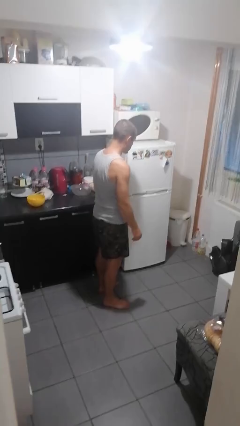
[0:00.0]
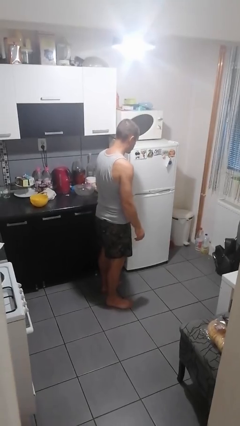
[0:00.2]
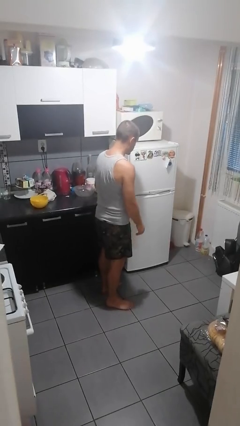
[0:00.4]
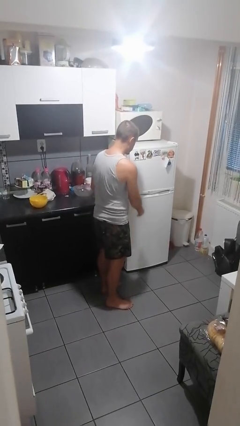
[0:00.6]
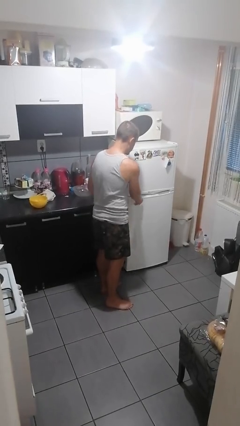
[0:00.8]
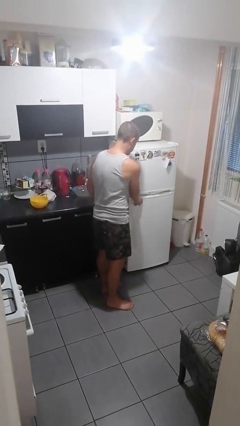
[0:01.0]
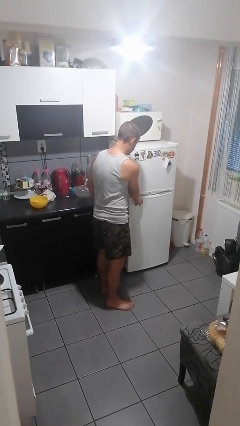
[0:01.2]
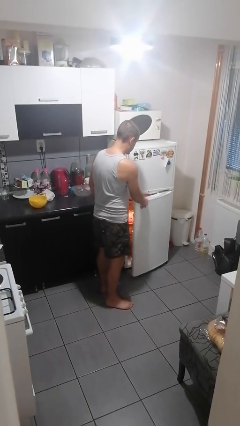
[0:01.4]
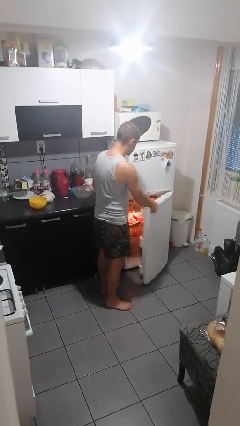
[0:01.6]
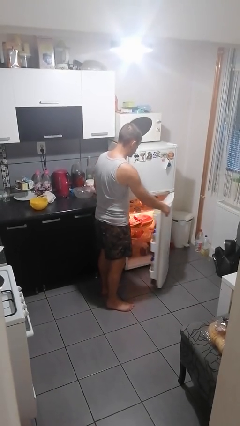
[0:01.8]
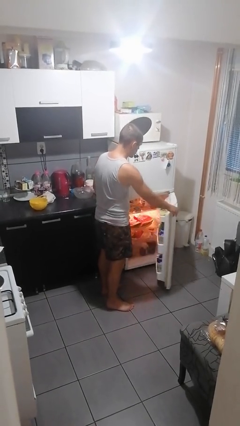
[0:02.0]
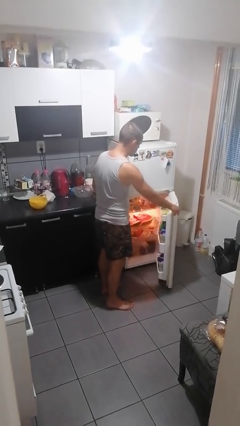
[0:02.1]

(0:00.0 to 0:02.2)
person opens refrigerator

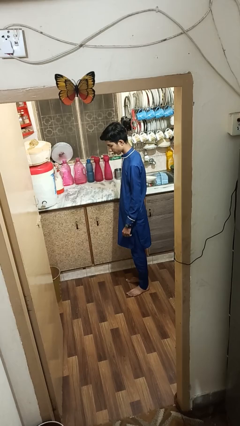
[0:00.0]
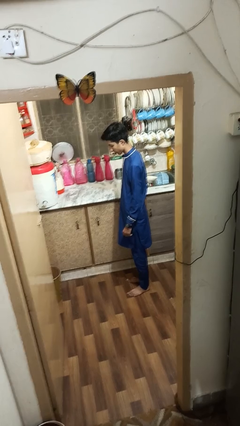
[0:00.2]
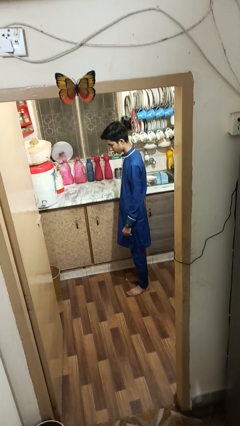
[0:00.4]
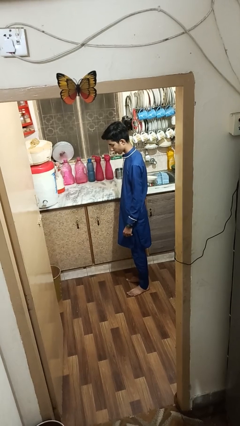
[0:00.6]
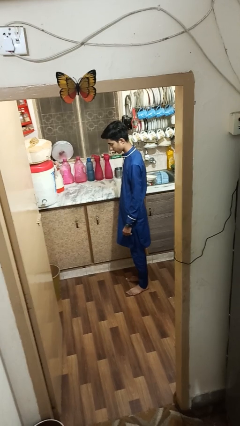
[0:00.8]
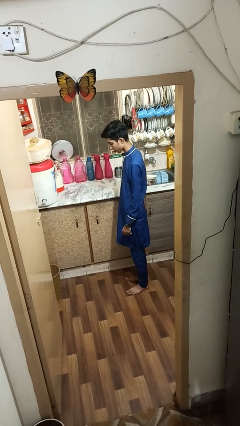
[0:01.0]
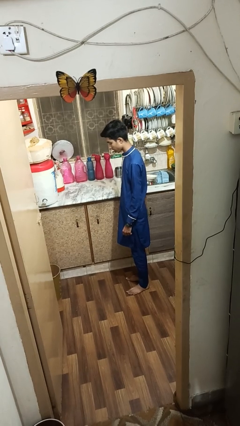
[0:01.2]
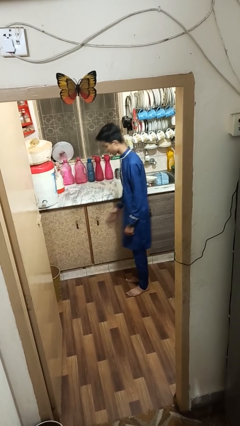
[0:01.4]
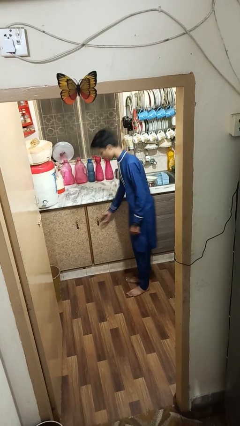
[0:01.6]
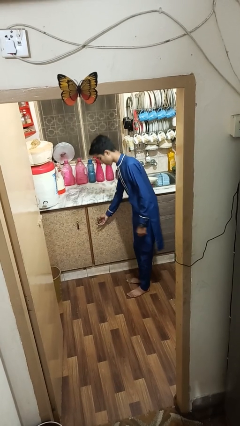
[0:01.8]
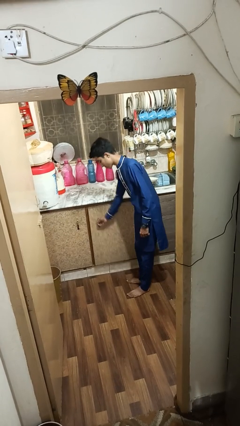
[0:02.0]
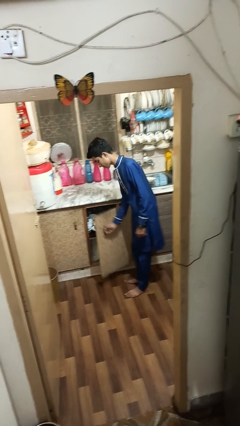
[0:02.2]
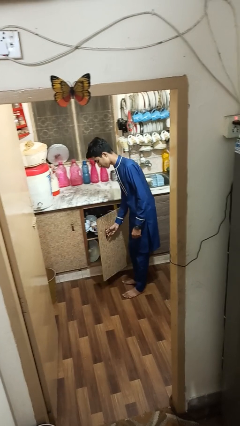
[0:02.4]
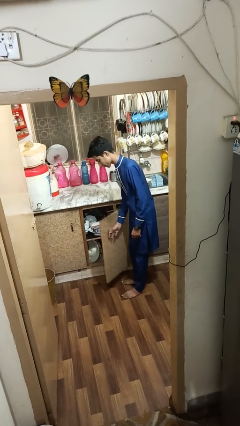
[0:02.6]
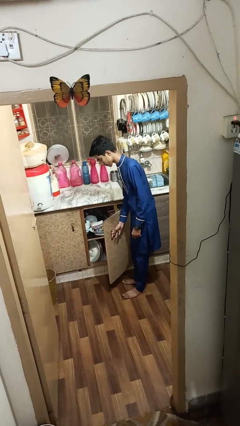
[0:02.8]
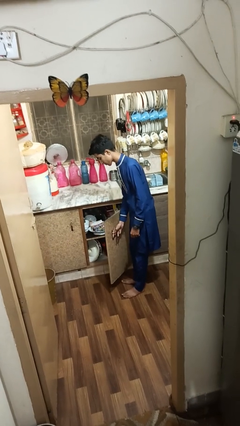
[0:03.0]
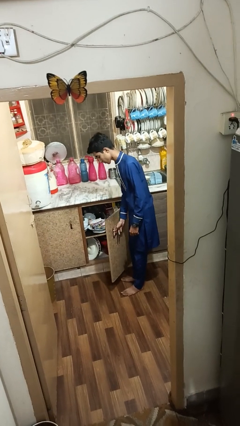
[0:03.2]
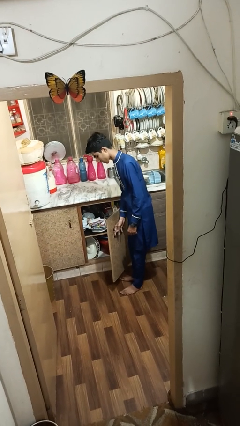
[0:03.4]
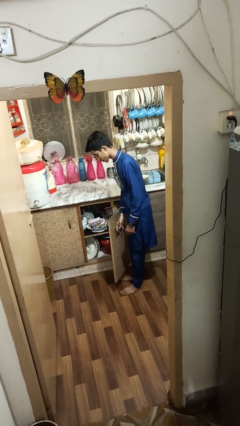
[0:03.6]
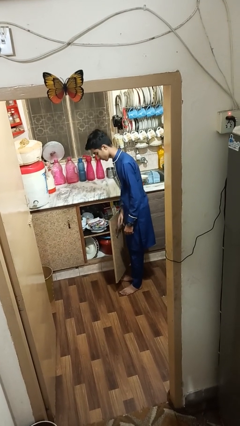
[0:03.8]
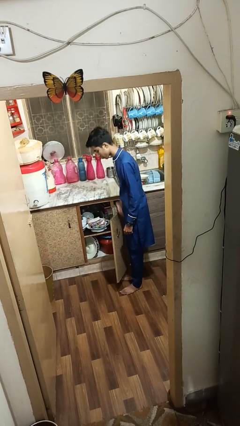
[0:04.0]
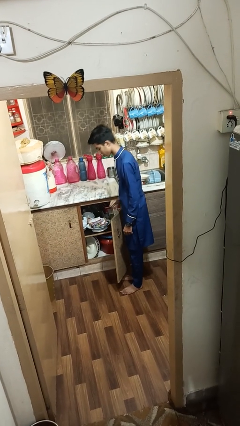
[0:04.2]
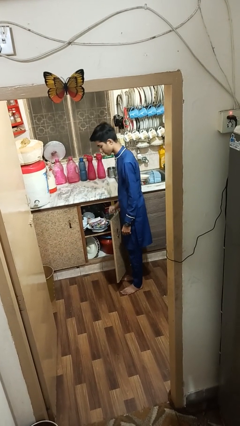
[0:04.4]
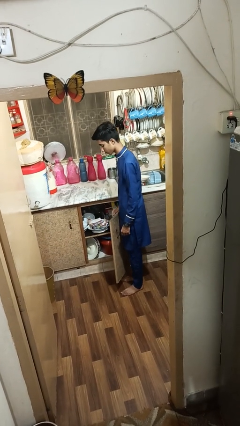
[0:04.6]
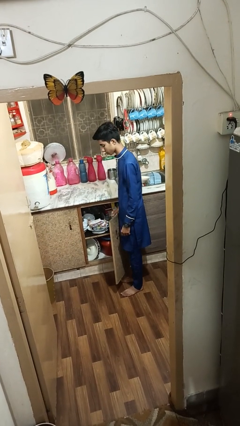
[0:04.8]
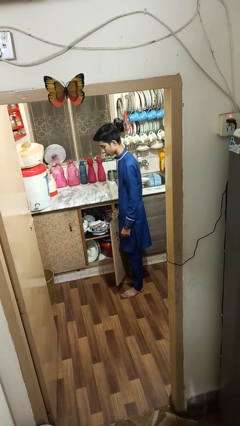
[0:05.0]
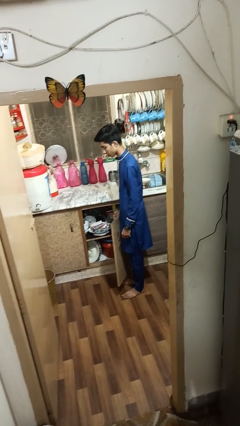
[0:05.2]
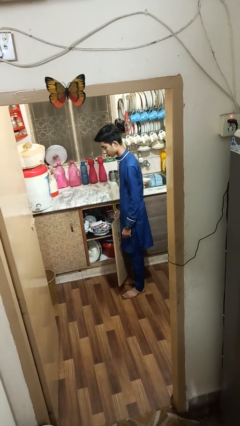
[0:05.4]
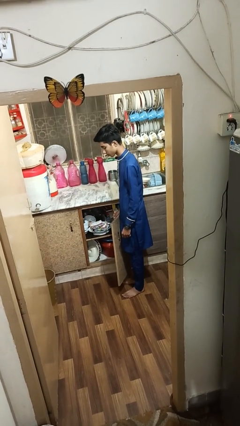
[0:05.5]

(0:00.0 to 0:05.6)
person opens cabinet

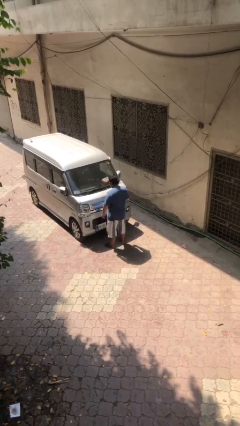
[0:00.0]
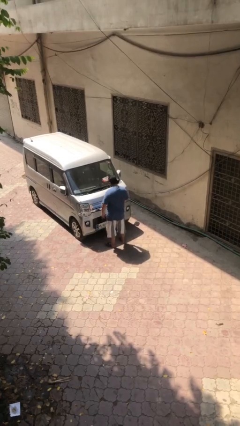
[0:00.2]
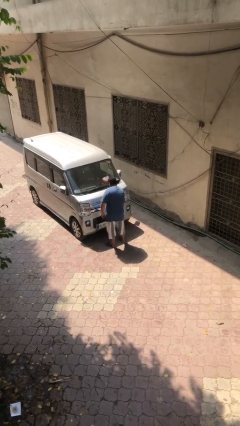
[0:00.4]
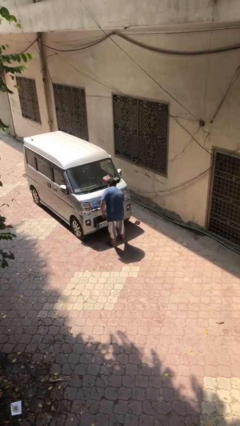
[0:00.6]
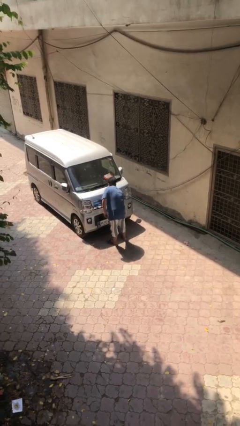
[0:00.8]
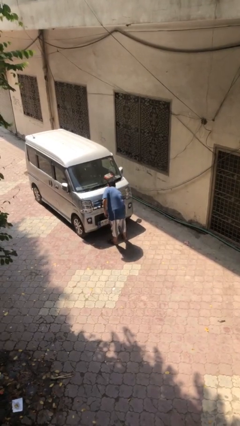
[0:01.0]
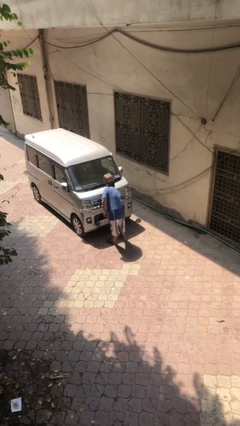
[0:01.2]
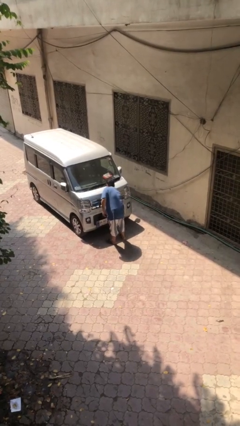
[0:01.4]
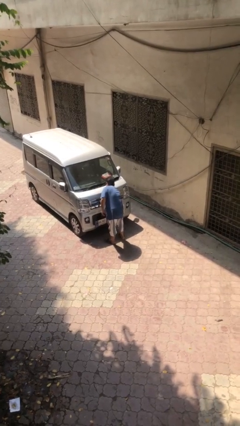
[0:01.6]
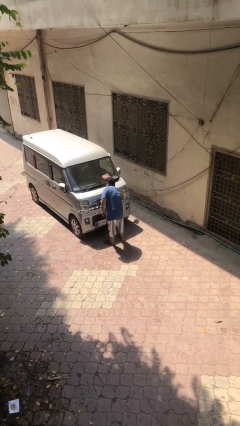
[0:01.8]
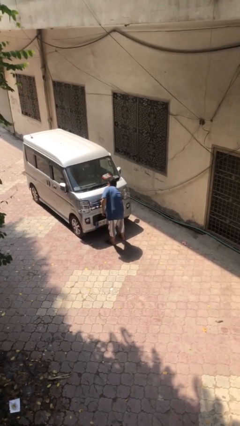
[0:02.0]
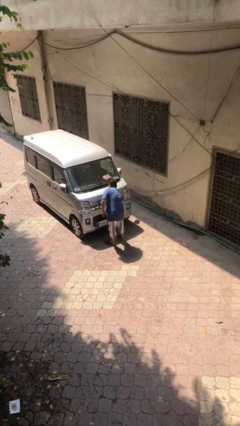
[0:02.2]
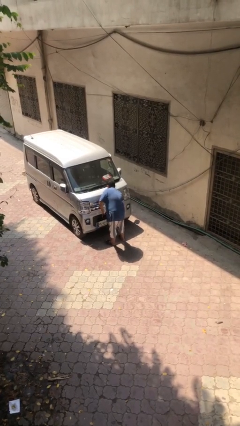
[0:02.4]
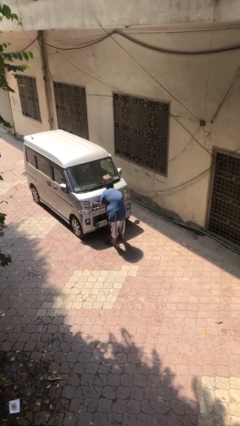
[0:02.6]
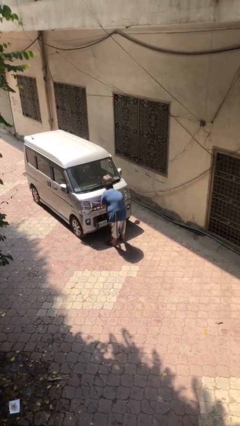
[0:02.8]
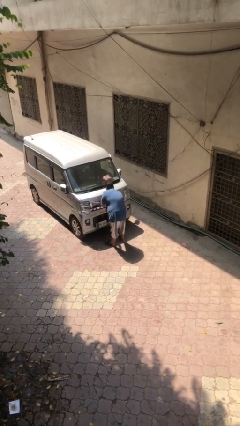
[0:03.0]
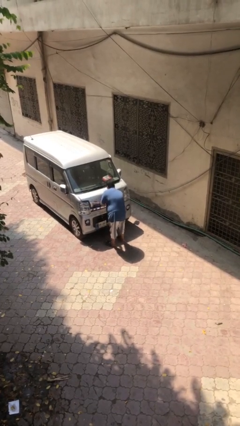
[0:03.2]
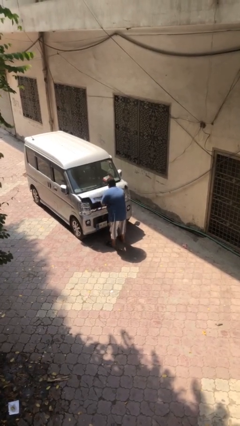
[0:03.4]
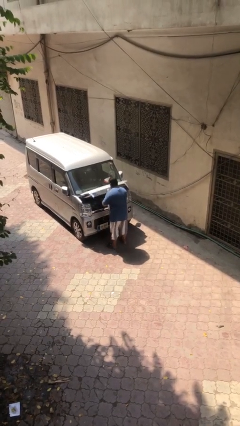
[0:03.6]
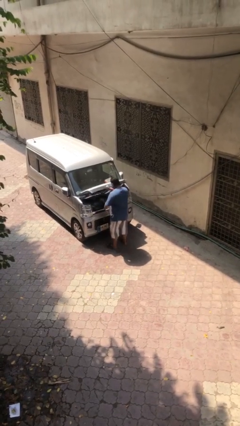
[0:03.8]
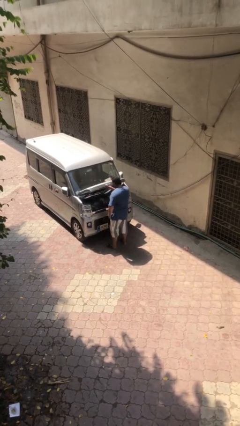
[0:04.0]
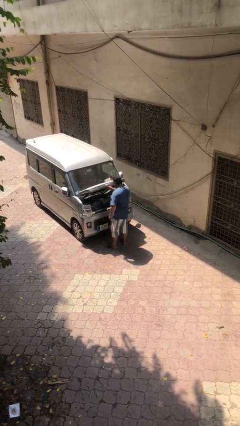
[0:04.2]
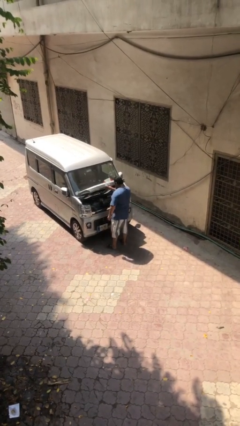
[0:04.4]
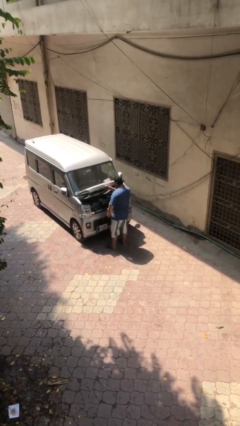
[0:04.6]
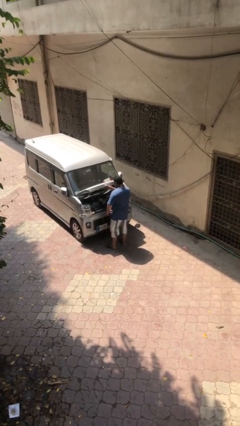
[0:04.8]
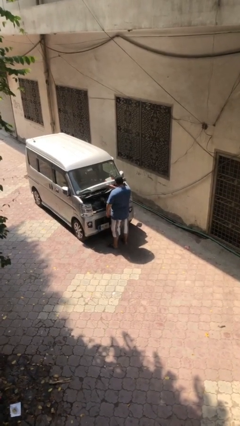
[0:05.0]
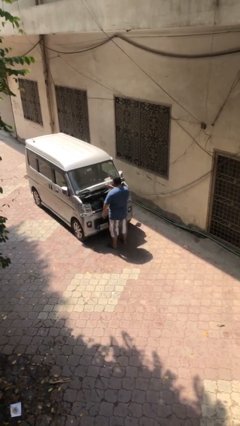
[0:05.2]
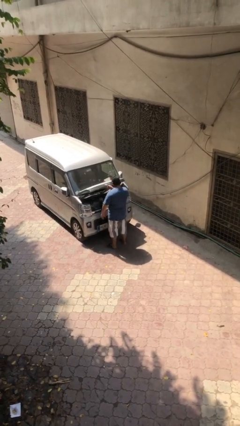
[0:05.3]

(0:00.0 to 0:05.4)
person opens car hood

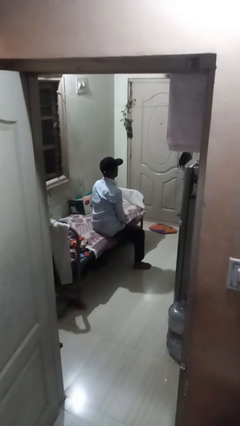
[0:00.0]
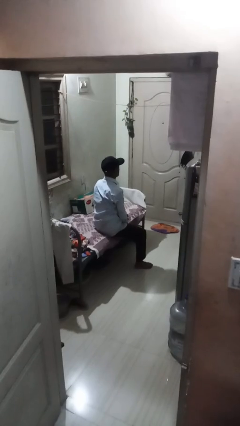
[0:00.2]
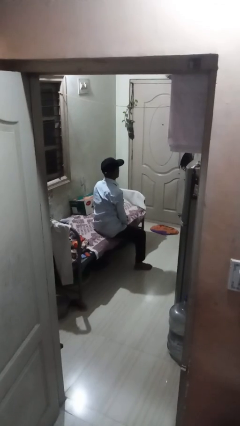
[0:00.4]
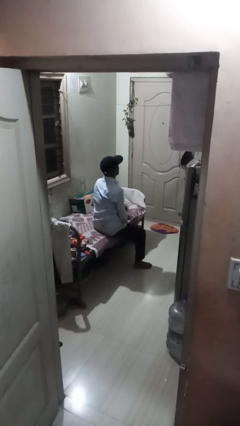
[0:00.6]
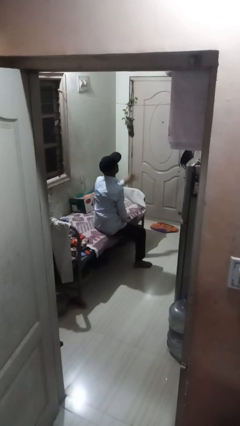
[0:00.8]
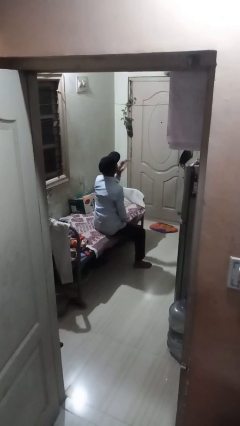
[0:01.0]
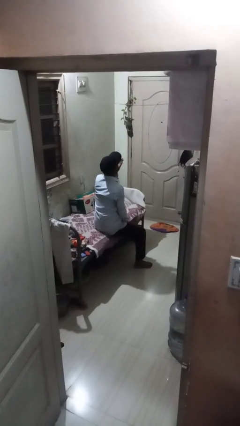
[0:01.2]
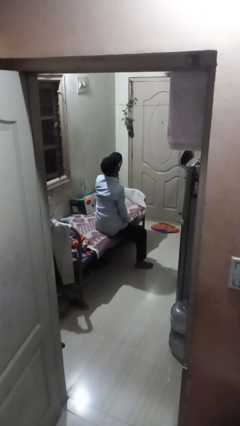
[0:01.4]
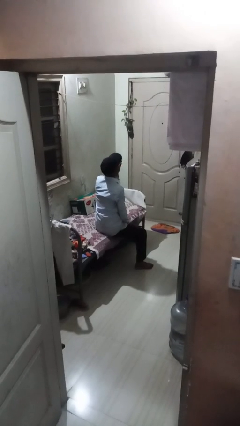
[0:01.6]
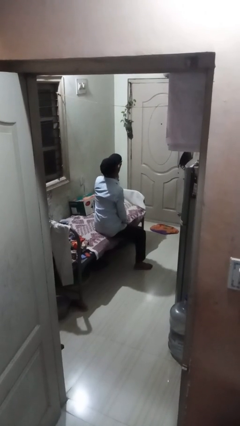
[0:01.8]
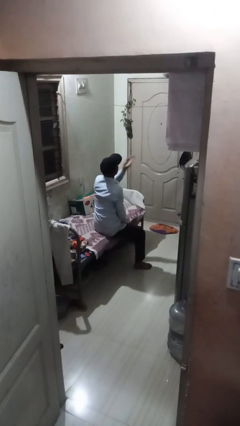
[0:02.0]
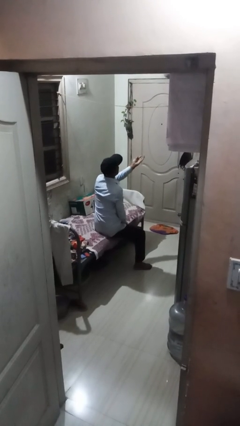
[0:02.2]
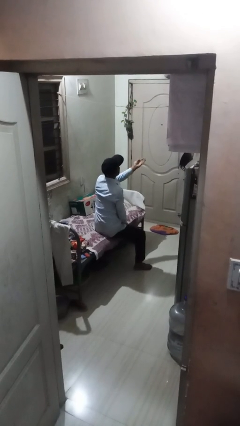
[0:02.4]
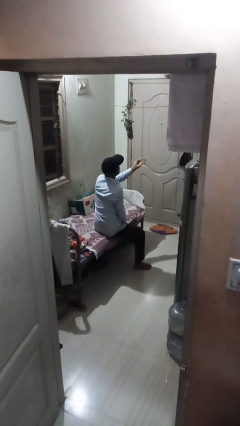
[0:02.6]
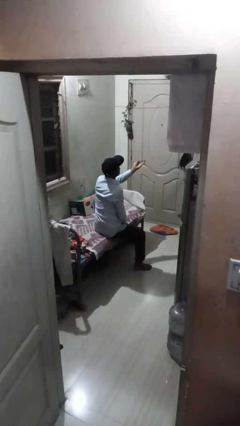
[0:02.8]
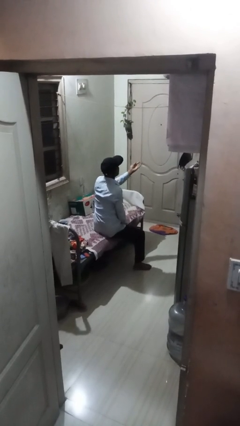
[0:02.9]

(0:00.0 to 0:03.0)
person gestures blow kiss

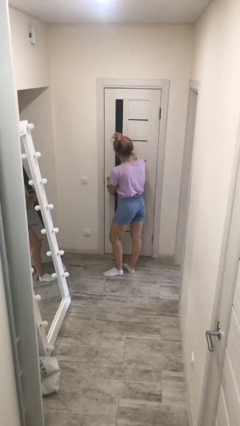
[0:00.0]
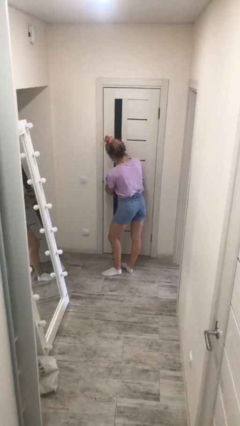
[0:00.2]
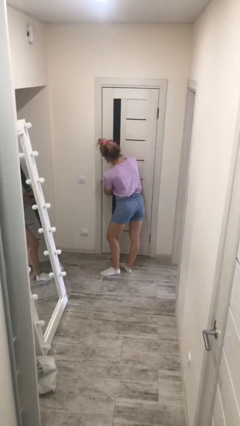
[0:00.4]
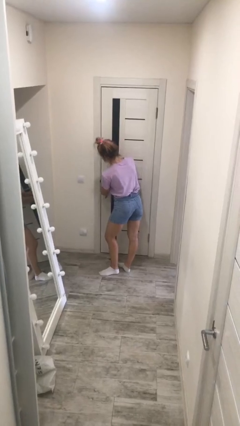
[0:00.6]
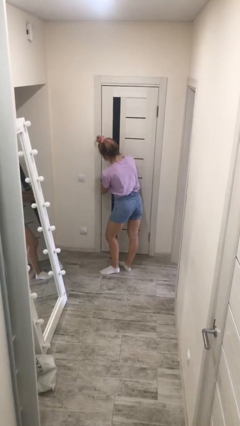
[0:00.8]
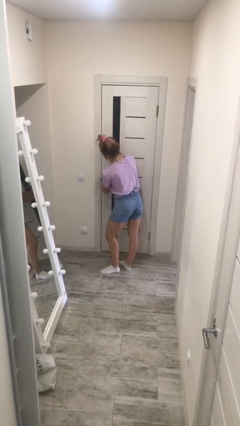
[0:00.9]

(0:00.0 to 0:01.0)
person locks door with keys

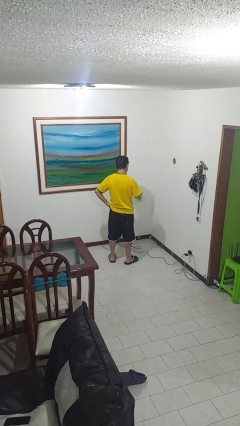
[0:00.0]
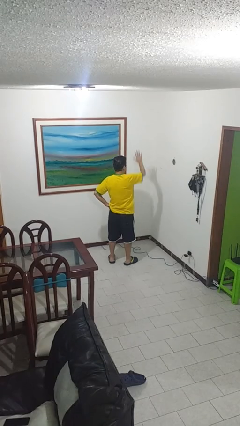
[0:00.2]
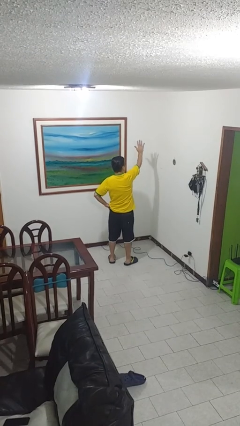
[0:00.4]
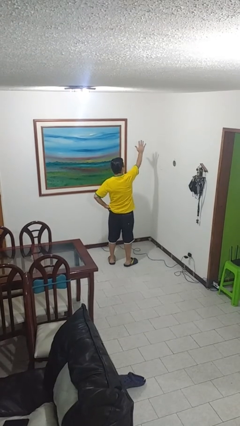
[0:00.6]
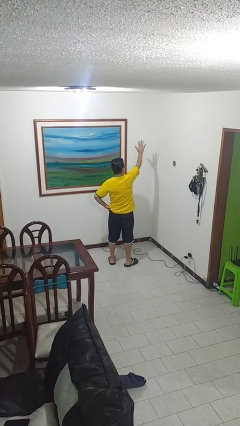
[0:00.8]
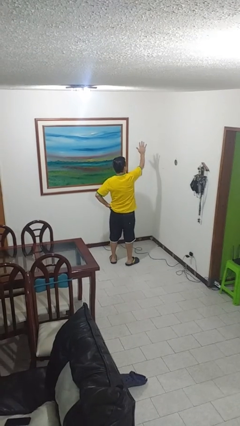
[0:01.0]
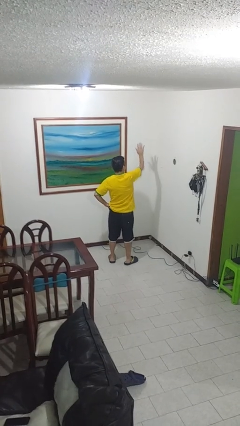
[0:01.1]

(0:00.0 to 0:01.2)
person gestures number five
